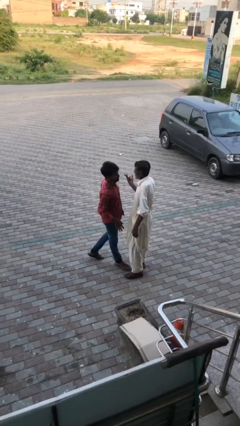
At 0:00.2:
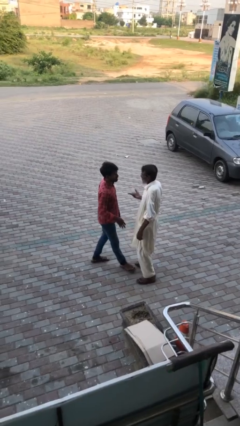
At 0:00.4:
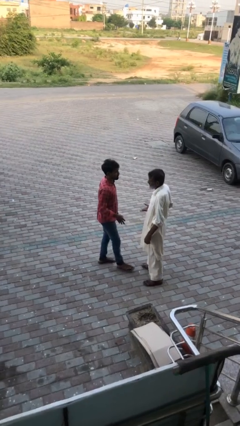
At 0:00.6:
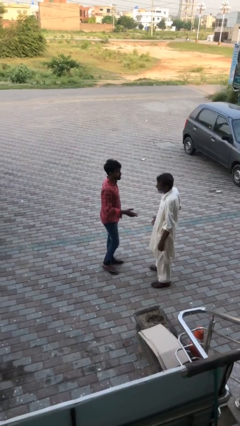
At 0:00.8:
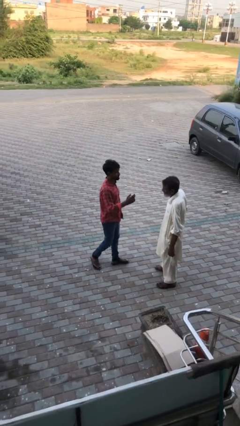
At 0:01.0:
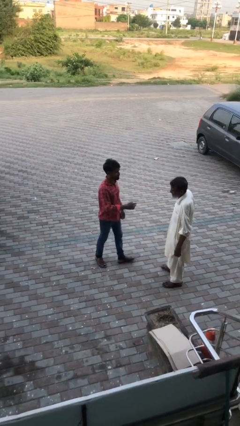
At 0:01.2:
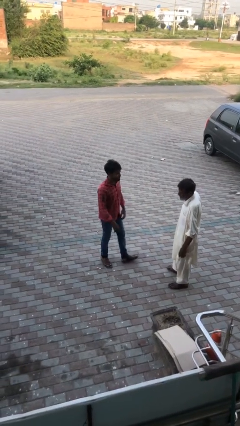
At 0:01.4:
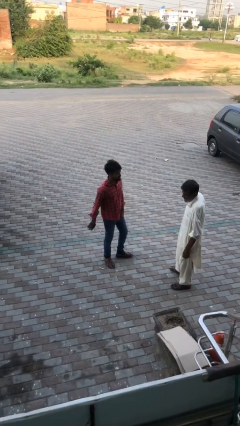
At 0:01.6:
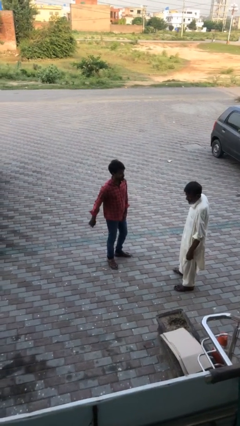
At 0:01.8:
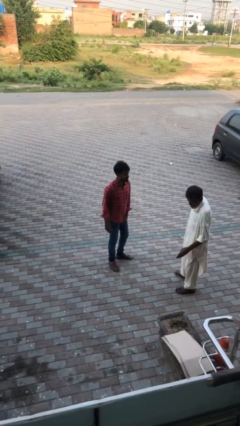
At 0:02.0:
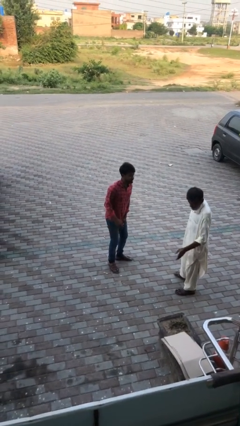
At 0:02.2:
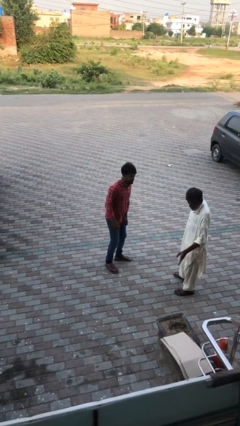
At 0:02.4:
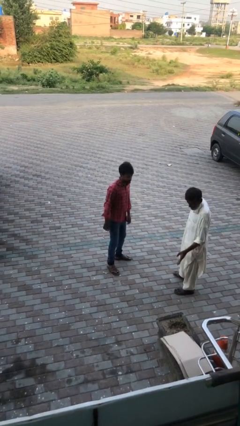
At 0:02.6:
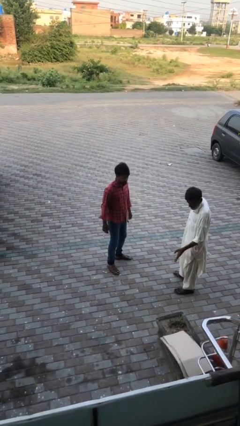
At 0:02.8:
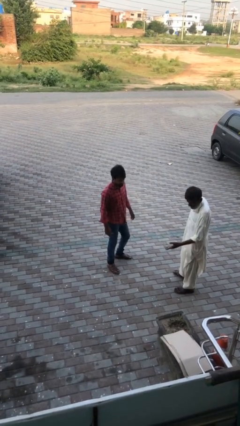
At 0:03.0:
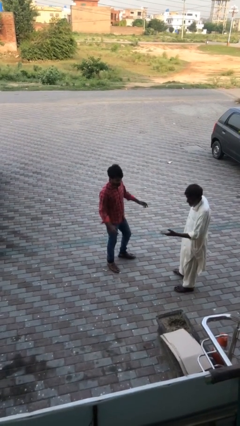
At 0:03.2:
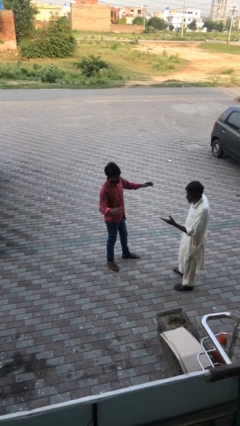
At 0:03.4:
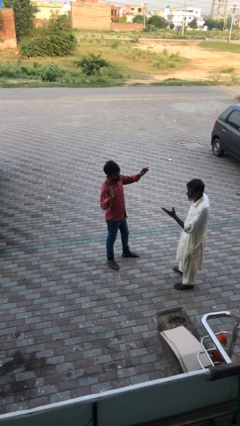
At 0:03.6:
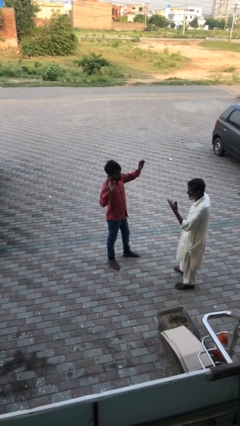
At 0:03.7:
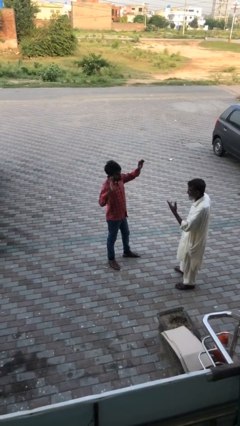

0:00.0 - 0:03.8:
person talks to person

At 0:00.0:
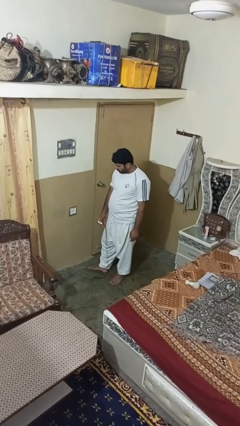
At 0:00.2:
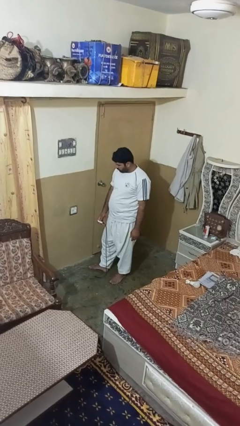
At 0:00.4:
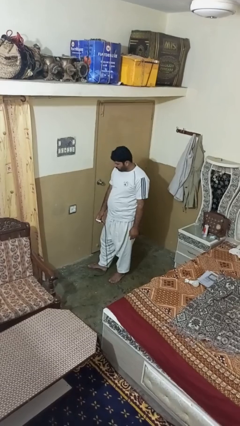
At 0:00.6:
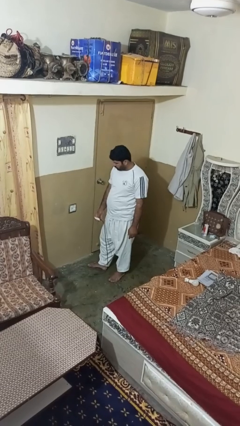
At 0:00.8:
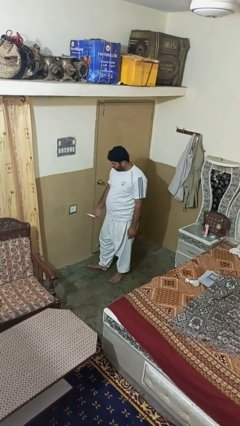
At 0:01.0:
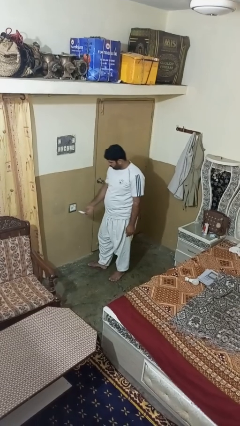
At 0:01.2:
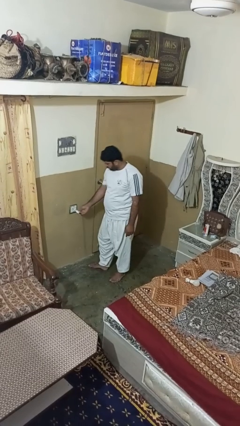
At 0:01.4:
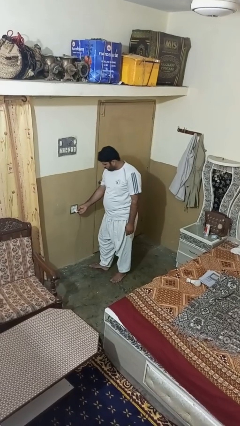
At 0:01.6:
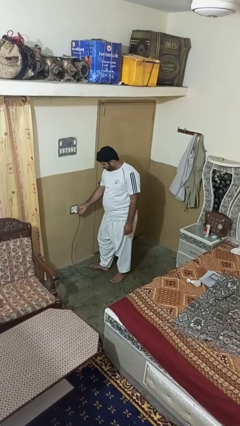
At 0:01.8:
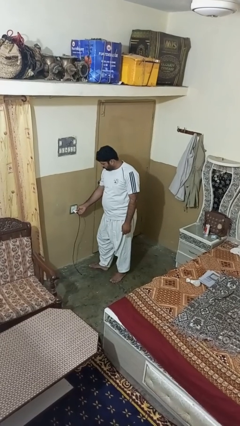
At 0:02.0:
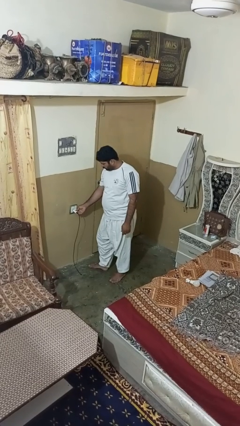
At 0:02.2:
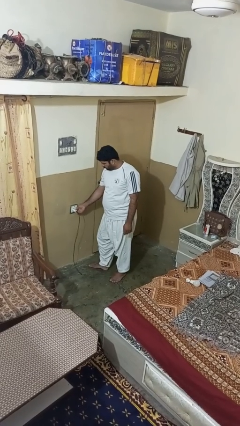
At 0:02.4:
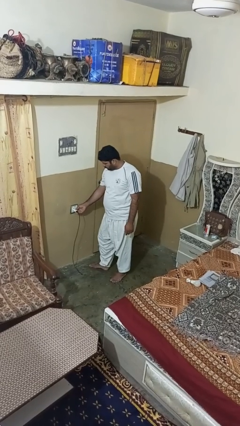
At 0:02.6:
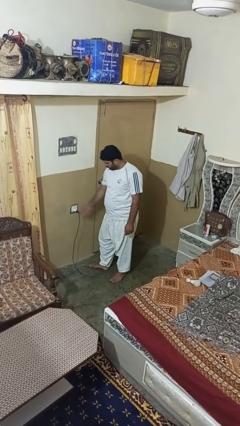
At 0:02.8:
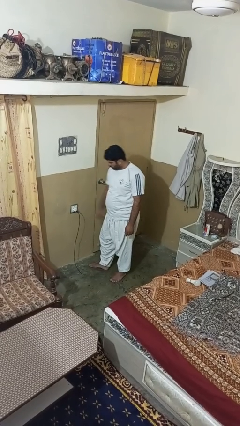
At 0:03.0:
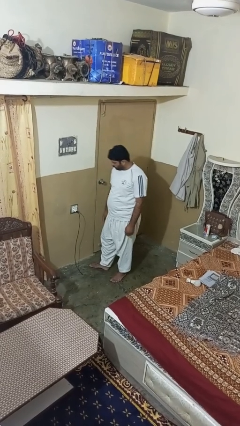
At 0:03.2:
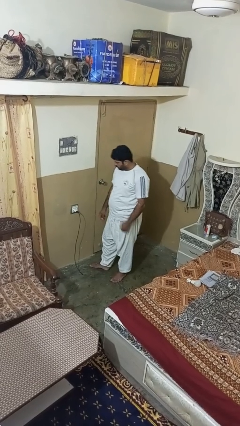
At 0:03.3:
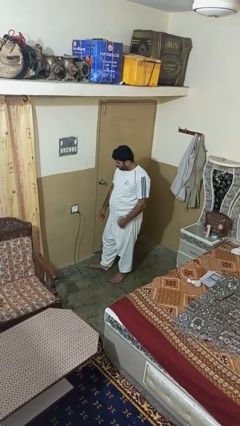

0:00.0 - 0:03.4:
person plugs into electrical socket

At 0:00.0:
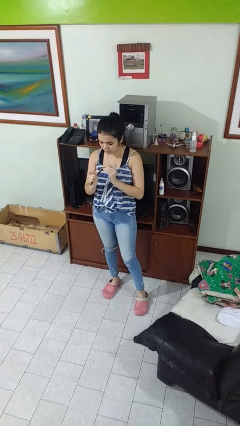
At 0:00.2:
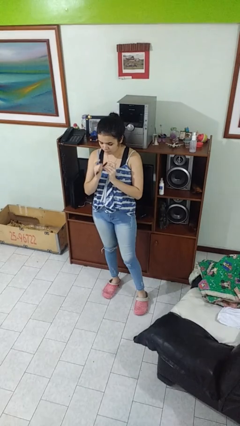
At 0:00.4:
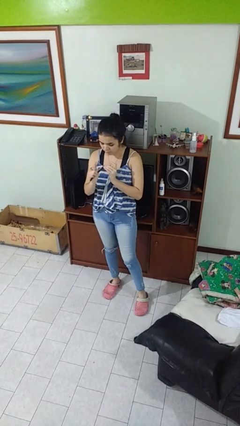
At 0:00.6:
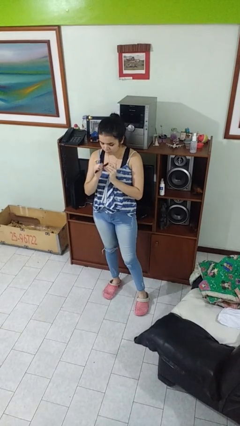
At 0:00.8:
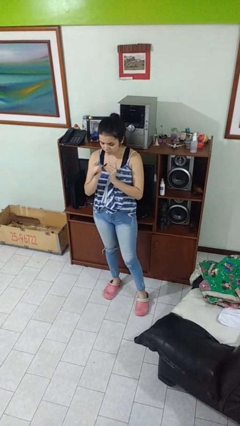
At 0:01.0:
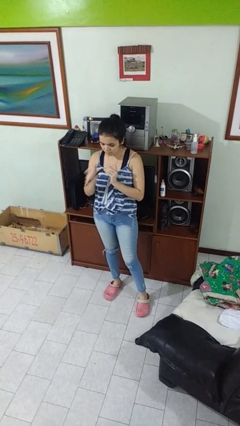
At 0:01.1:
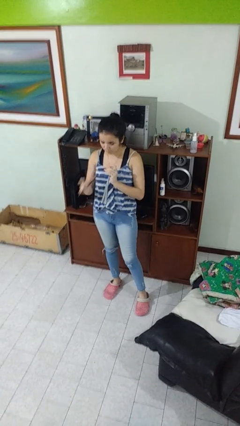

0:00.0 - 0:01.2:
person files fingernails

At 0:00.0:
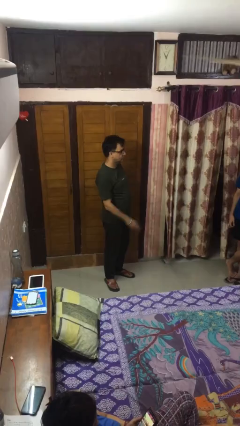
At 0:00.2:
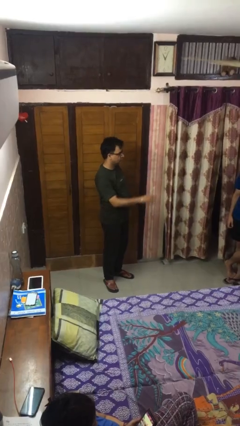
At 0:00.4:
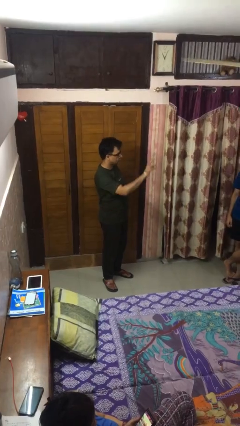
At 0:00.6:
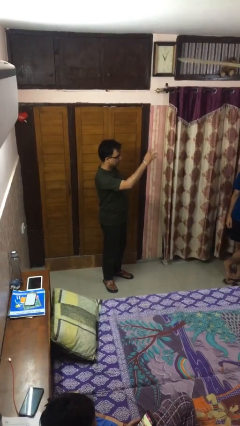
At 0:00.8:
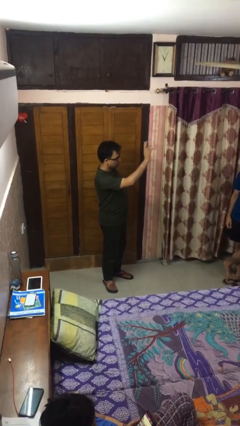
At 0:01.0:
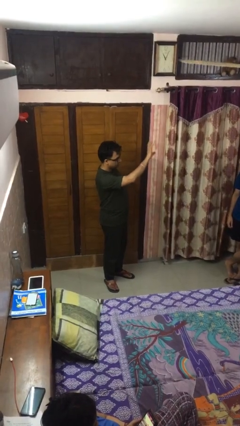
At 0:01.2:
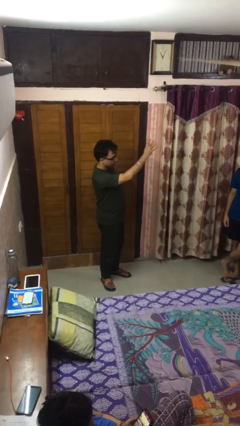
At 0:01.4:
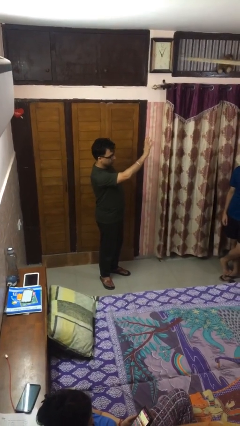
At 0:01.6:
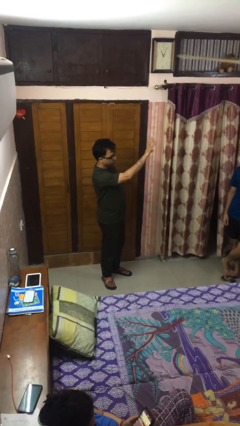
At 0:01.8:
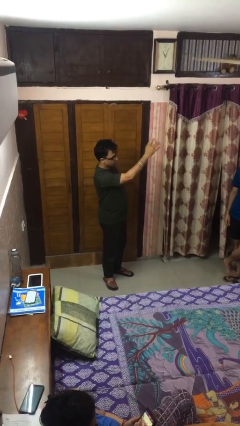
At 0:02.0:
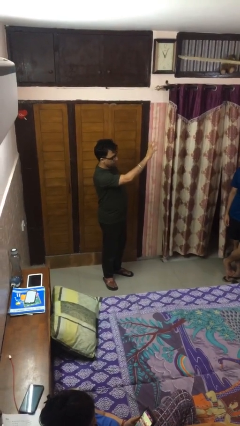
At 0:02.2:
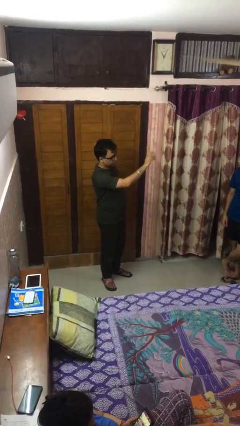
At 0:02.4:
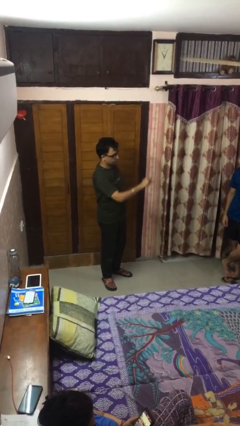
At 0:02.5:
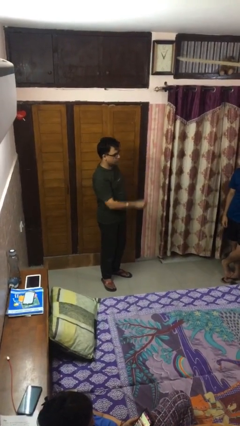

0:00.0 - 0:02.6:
person waves at person

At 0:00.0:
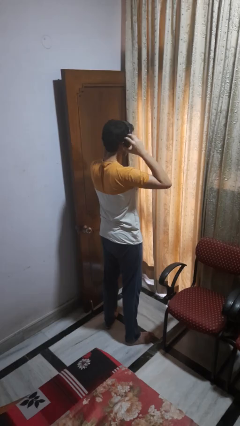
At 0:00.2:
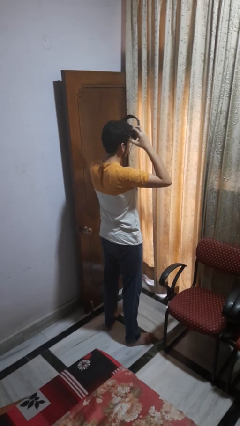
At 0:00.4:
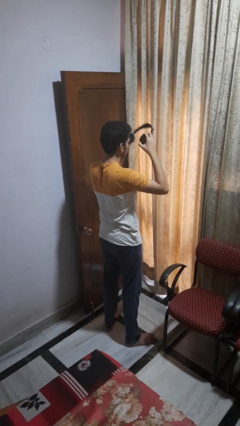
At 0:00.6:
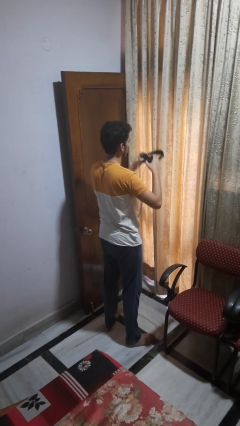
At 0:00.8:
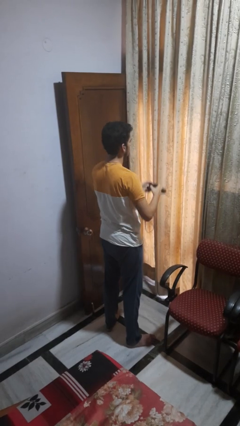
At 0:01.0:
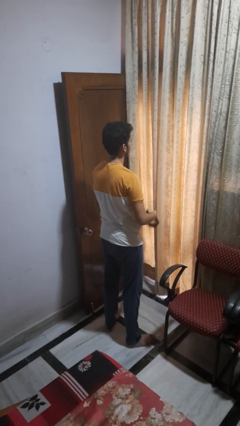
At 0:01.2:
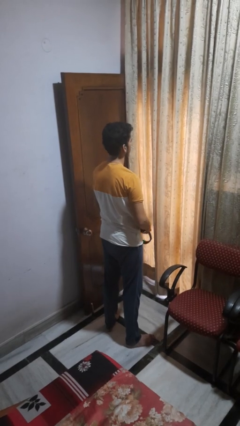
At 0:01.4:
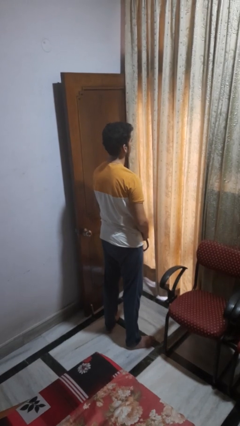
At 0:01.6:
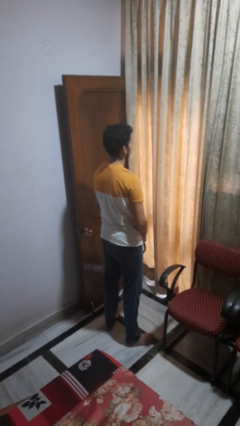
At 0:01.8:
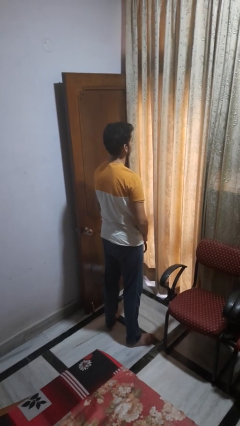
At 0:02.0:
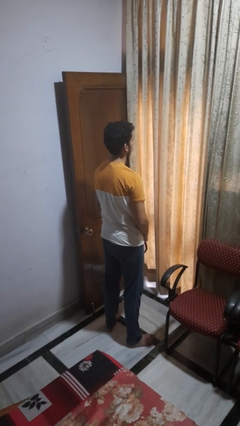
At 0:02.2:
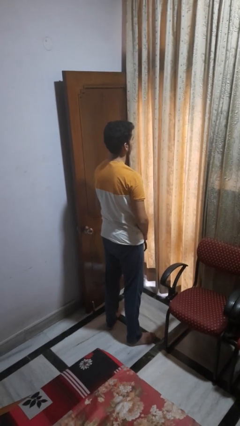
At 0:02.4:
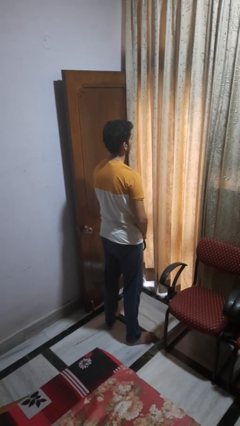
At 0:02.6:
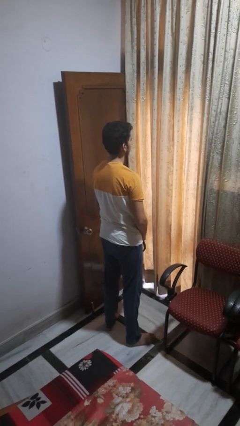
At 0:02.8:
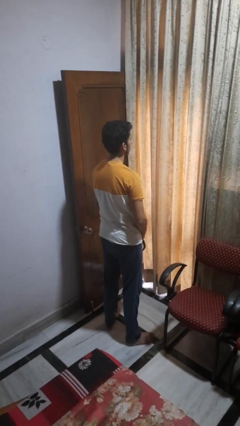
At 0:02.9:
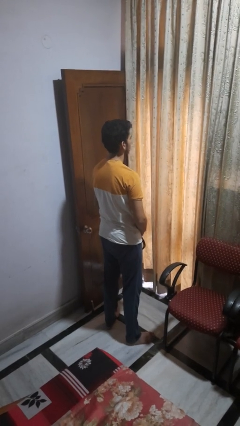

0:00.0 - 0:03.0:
person takes off headphones

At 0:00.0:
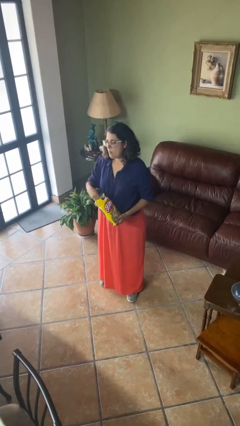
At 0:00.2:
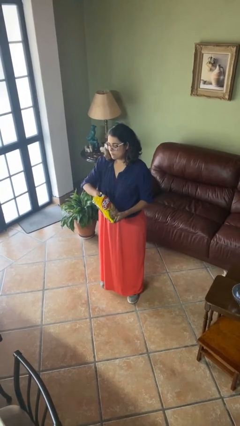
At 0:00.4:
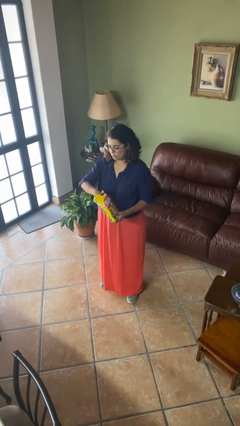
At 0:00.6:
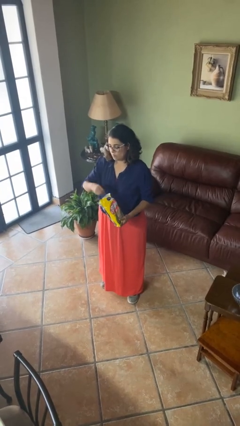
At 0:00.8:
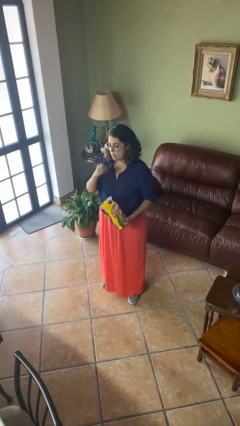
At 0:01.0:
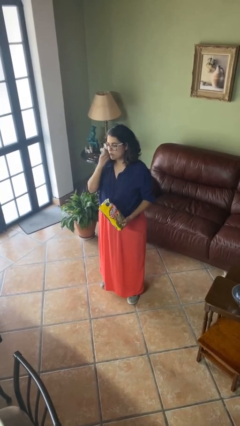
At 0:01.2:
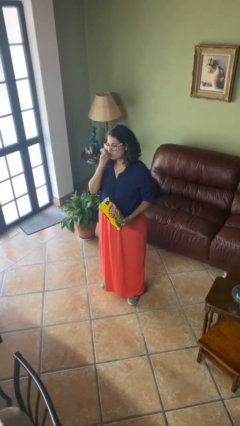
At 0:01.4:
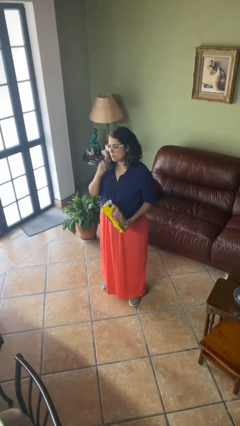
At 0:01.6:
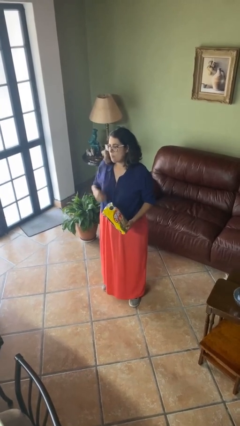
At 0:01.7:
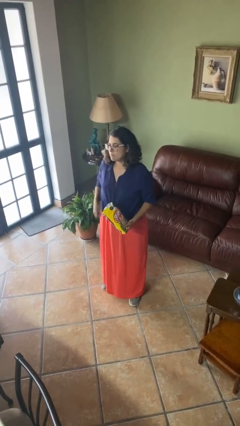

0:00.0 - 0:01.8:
person eats snack from bag

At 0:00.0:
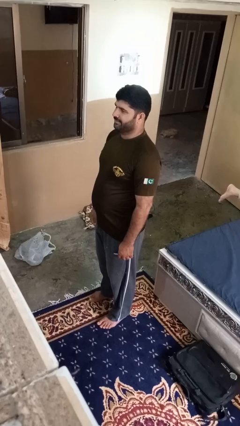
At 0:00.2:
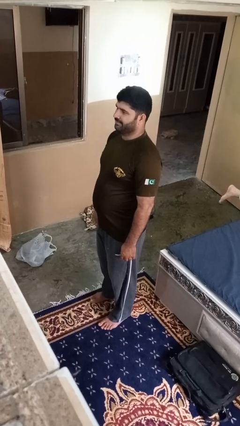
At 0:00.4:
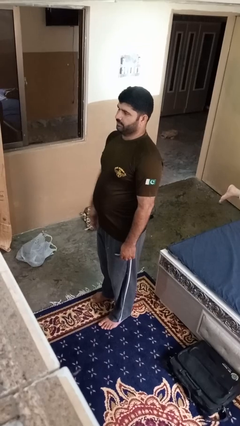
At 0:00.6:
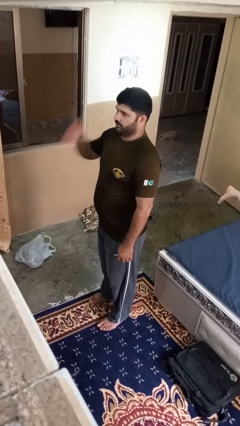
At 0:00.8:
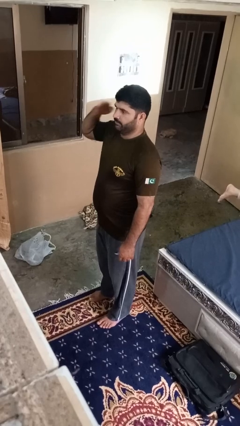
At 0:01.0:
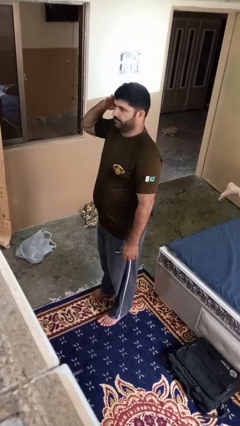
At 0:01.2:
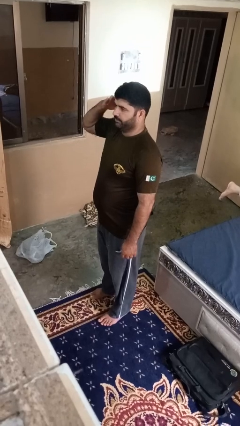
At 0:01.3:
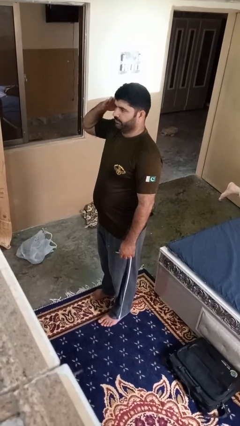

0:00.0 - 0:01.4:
person salutes
